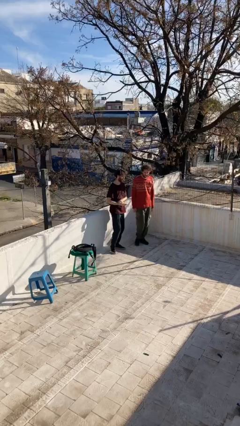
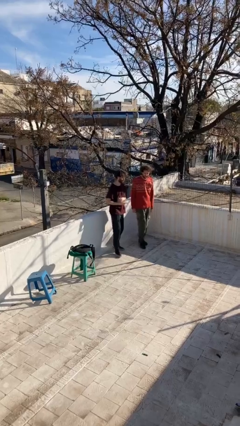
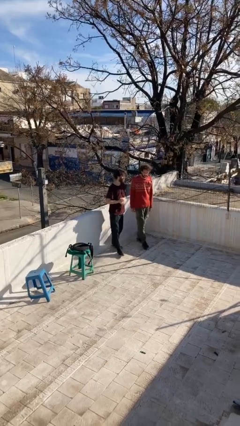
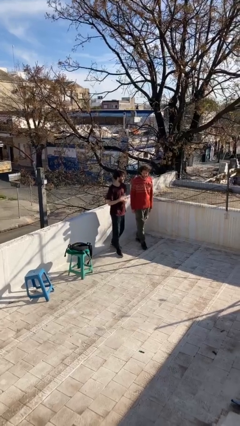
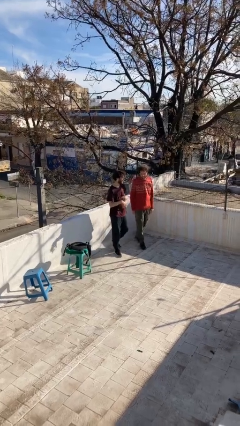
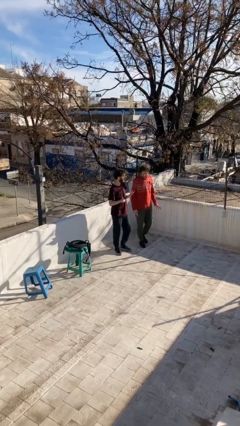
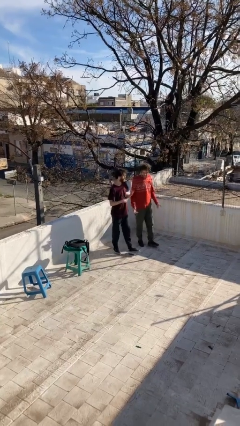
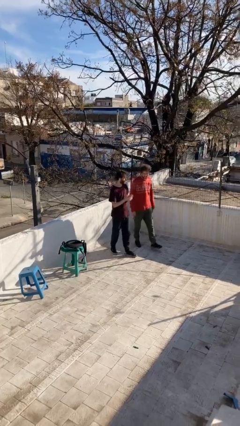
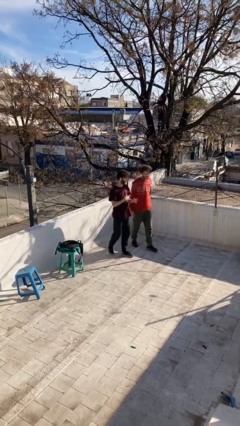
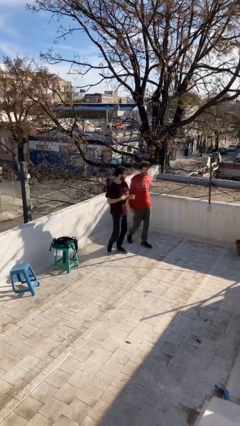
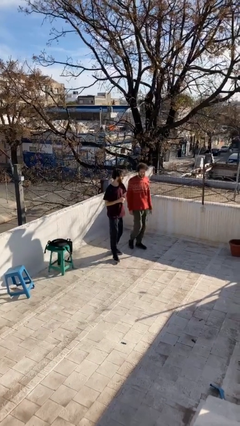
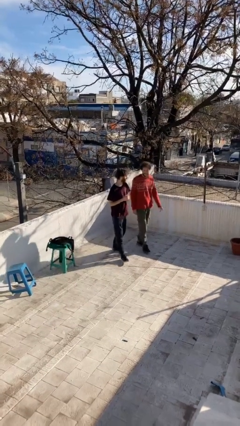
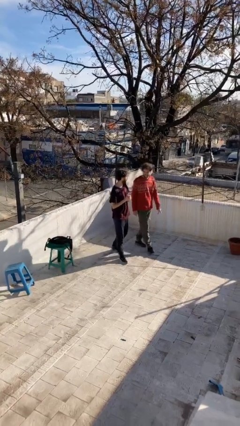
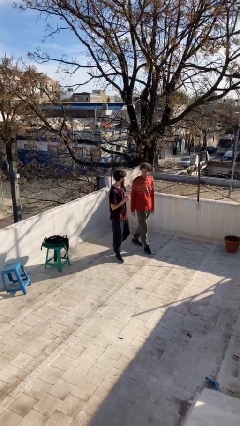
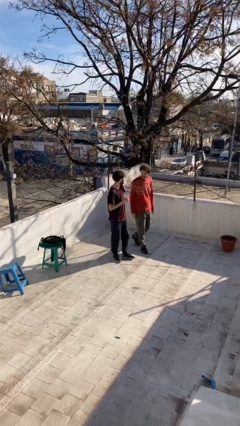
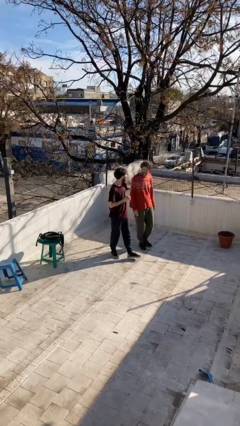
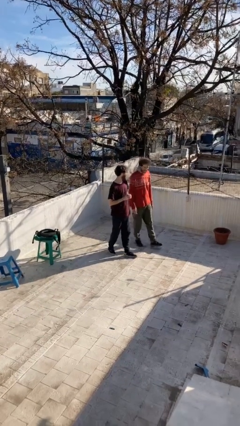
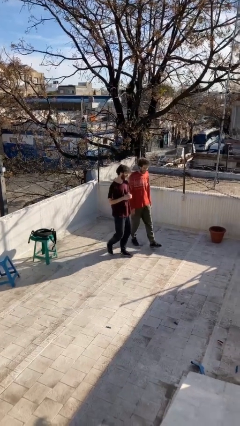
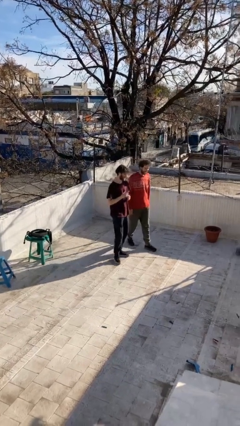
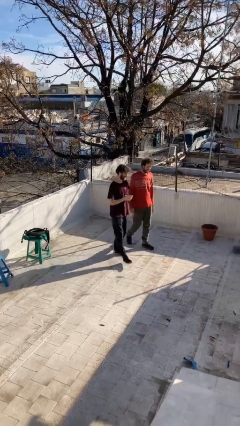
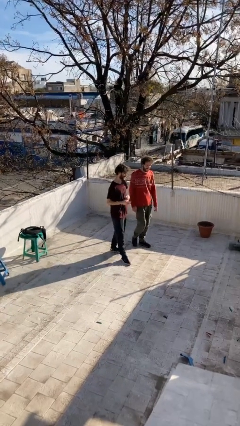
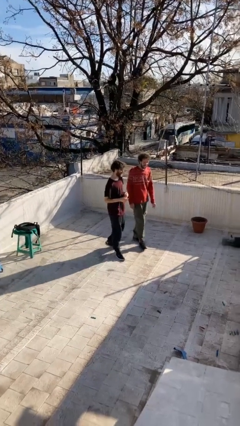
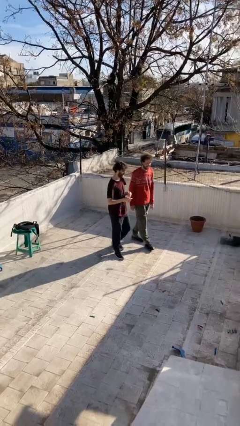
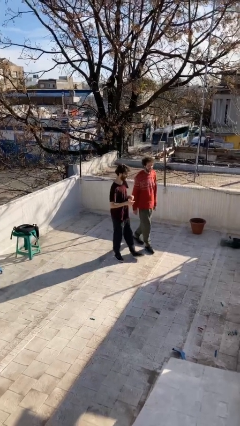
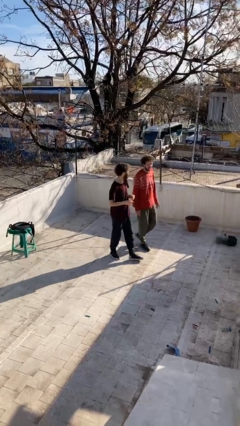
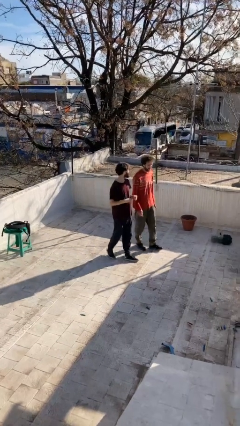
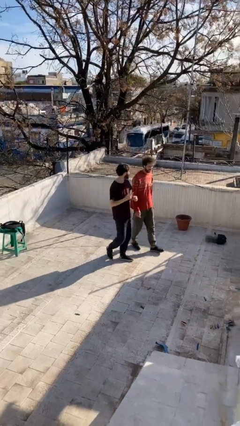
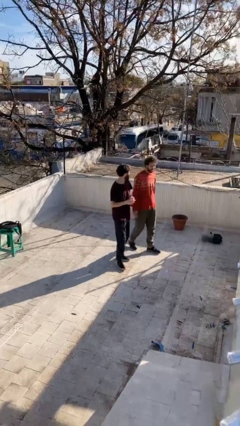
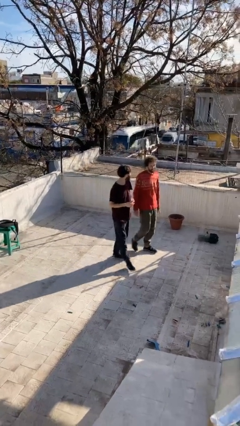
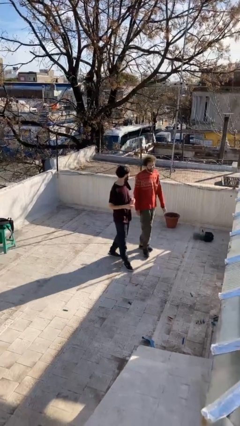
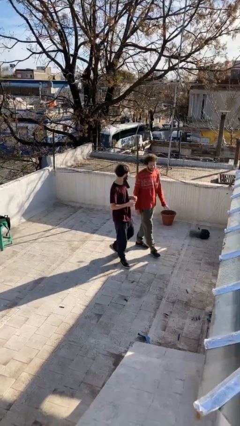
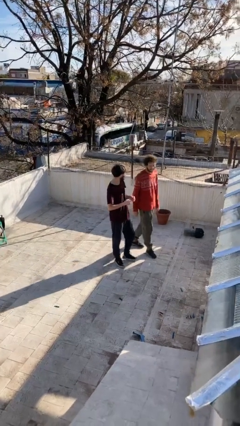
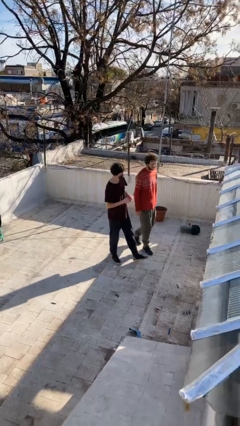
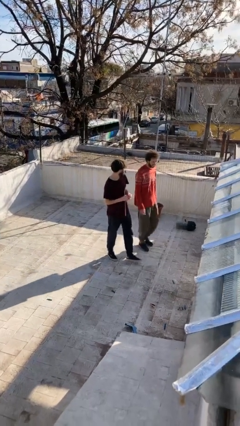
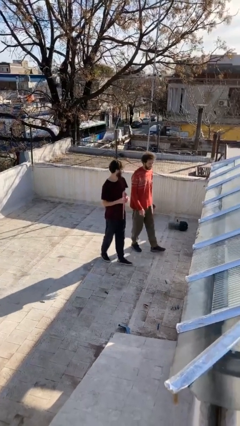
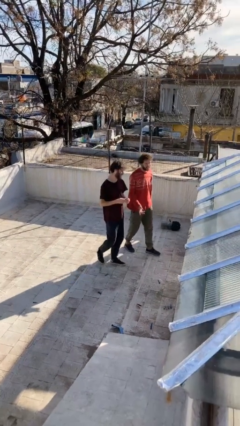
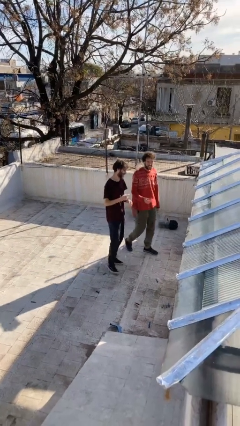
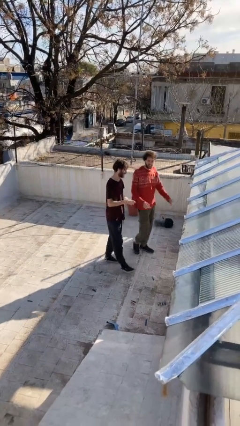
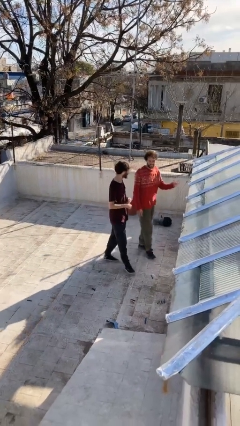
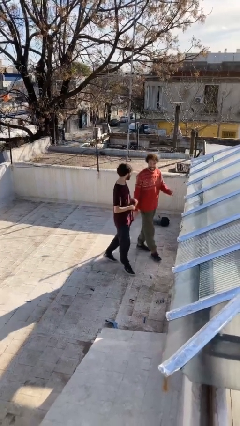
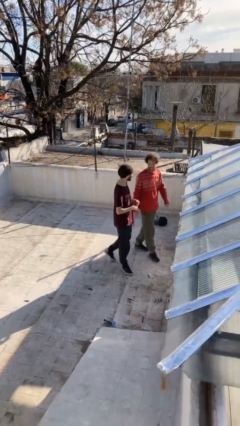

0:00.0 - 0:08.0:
person talks to person

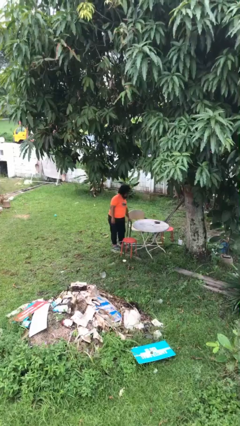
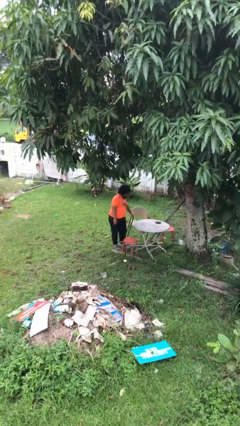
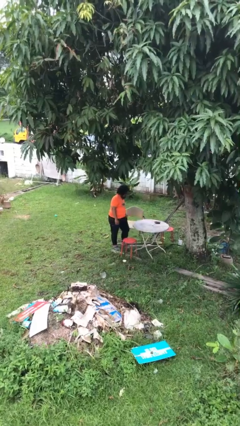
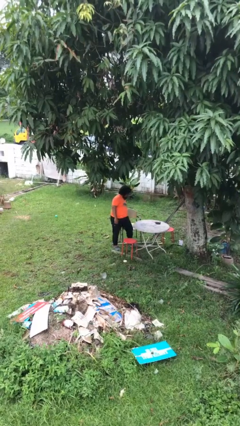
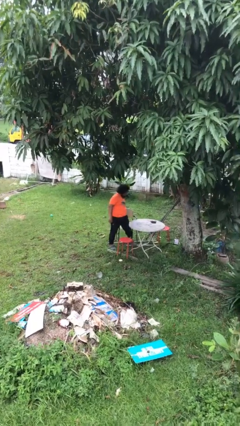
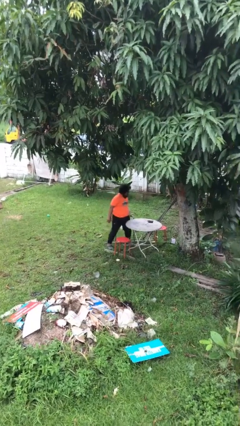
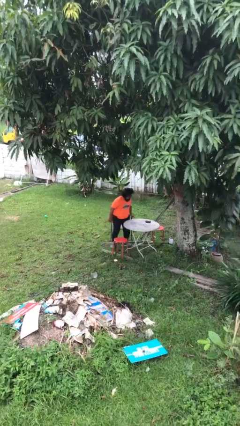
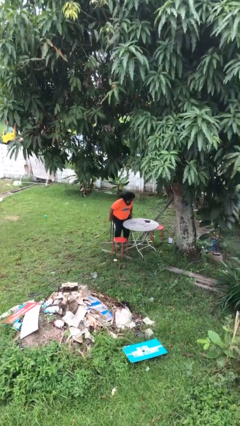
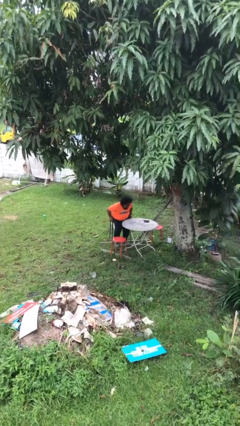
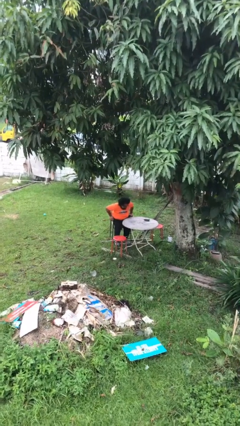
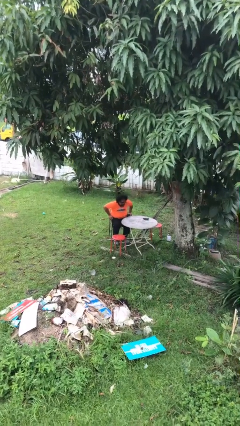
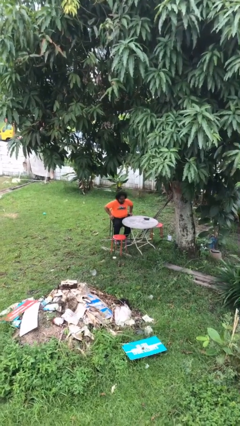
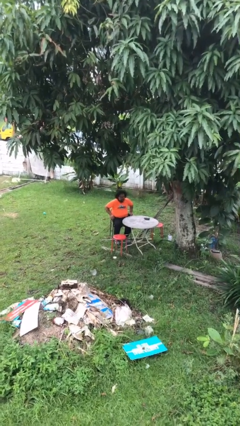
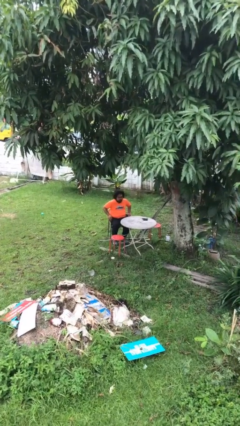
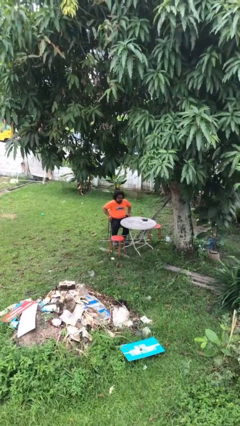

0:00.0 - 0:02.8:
person sits down

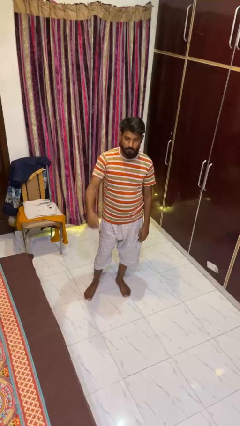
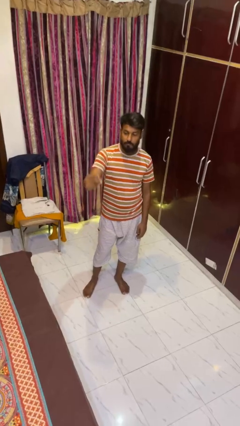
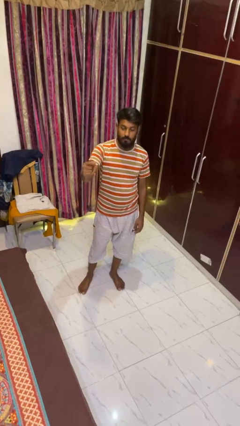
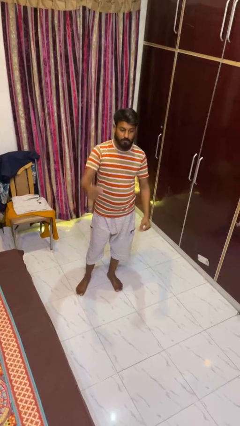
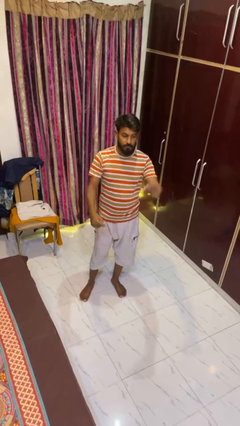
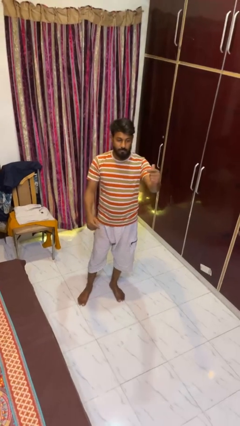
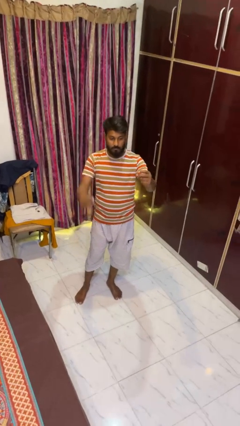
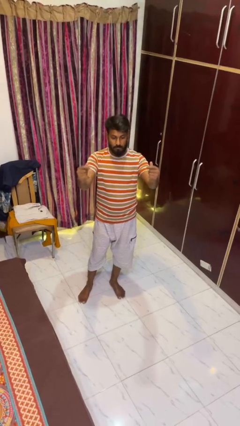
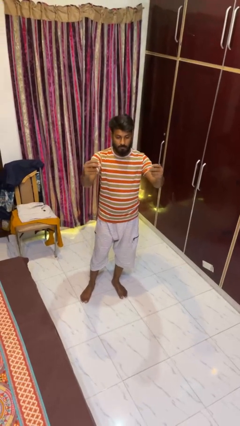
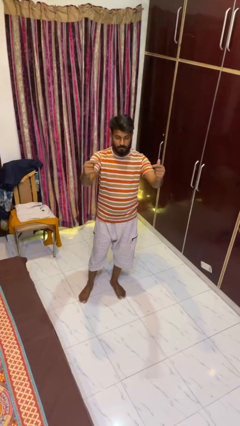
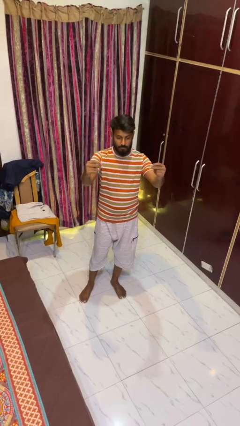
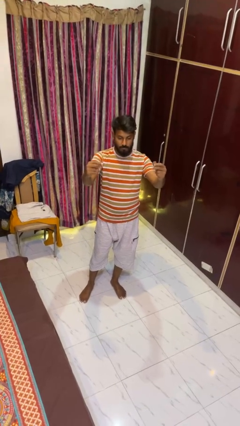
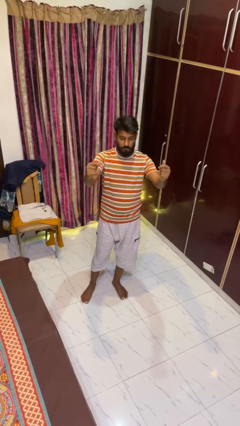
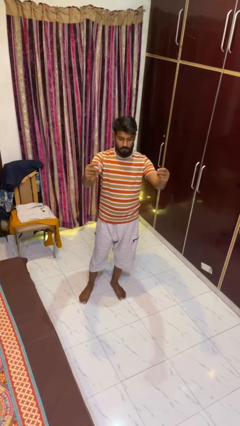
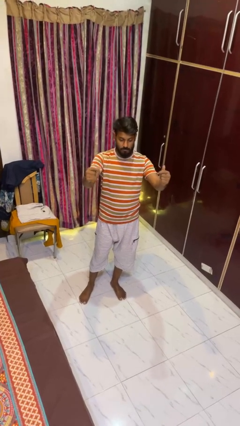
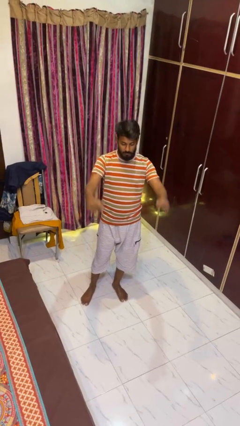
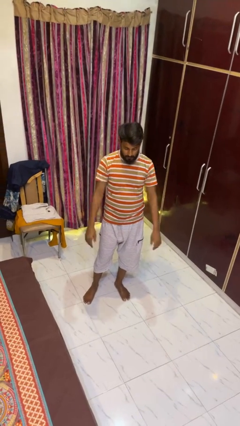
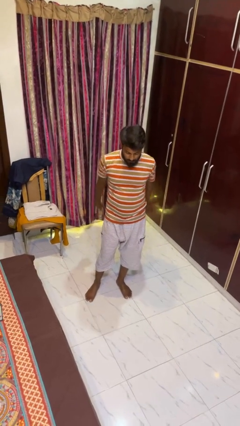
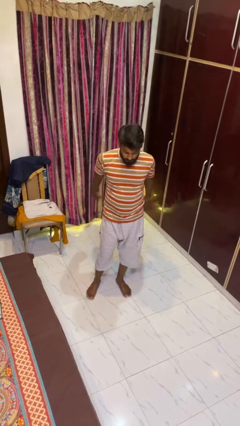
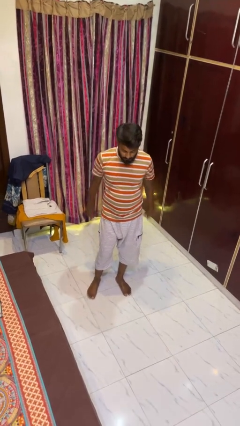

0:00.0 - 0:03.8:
person snaps fingers

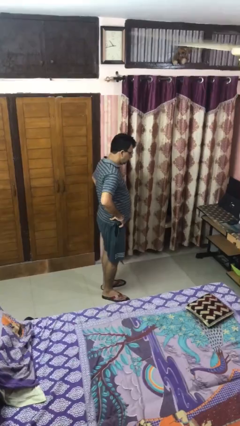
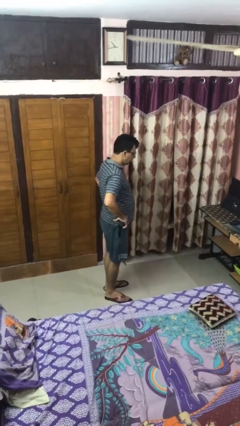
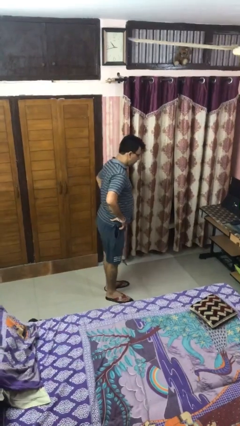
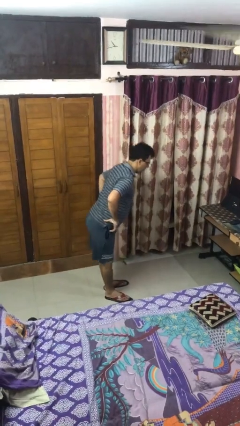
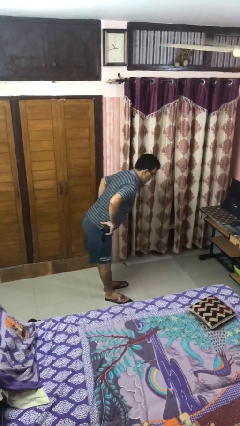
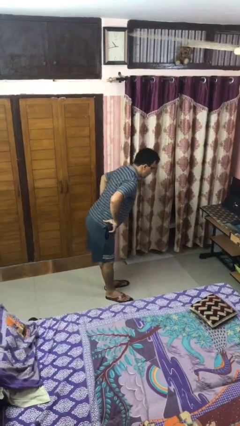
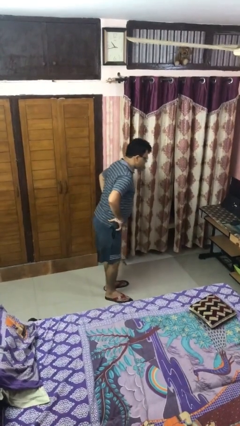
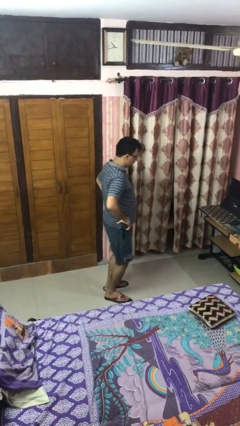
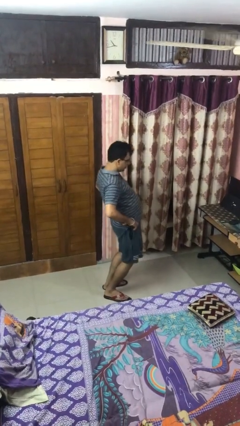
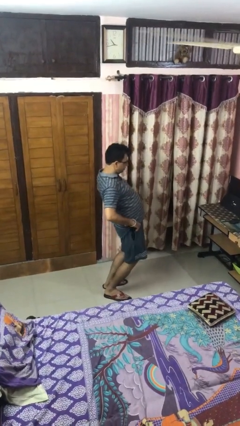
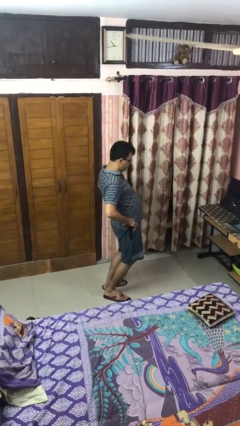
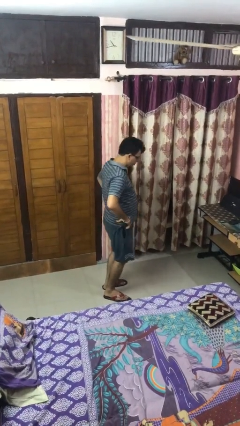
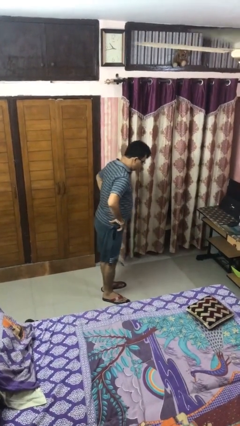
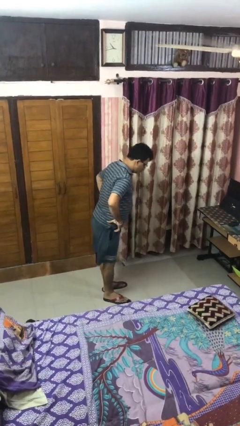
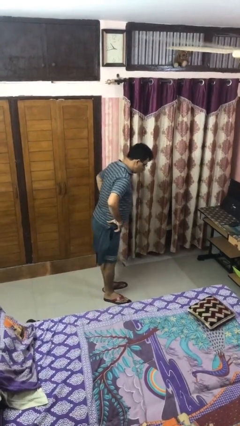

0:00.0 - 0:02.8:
person wiggles hips
